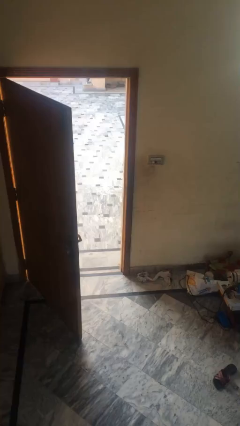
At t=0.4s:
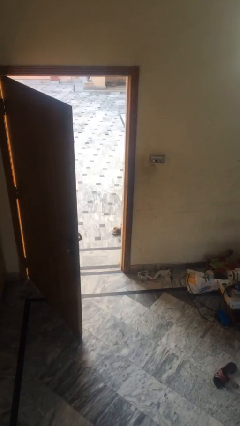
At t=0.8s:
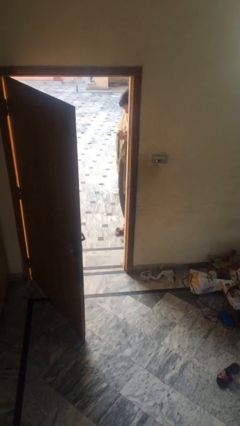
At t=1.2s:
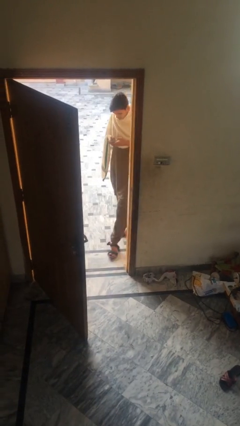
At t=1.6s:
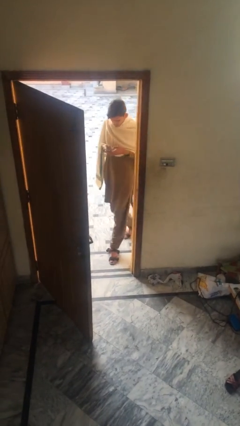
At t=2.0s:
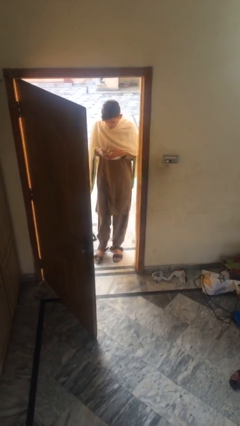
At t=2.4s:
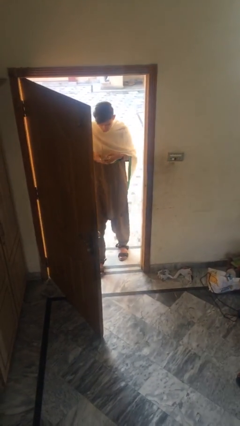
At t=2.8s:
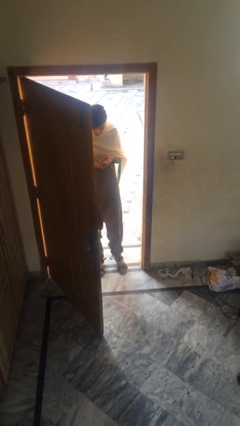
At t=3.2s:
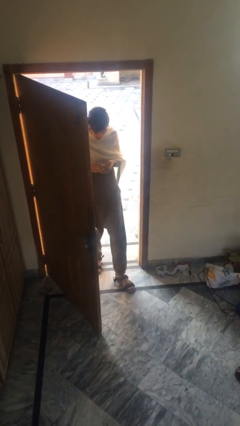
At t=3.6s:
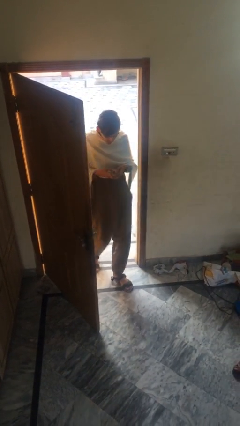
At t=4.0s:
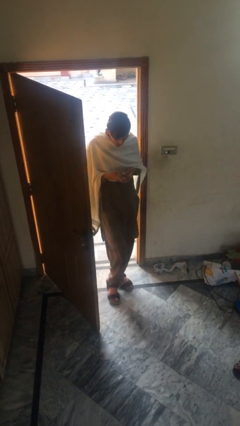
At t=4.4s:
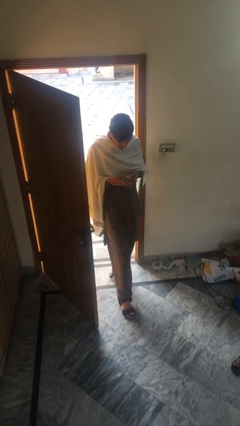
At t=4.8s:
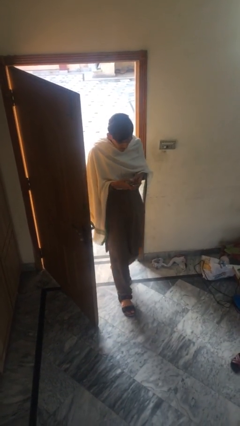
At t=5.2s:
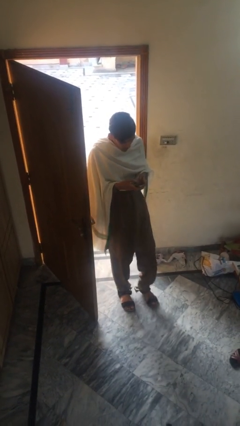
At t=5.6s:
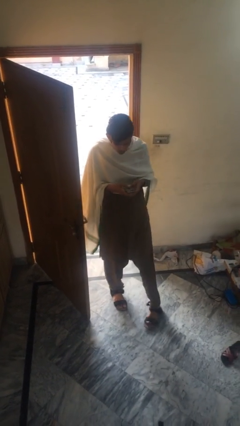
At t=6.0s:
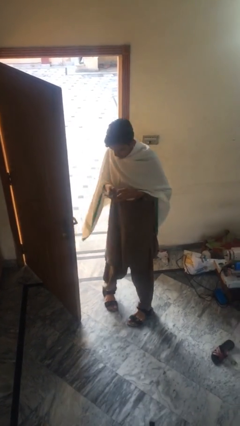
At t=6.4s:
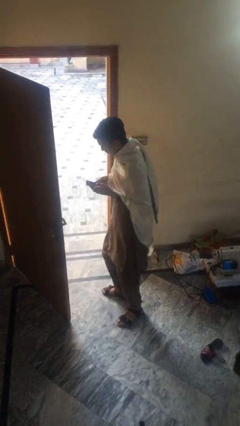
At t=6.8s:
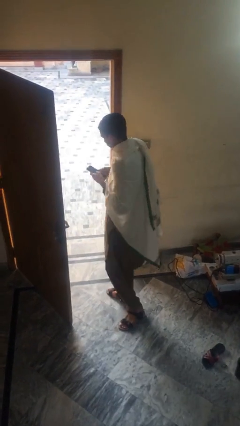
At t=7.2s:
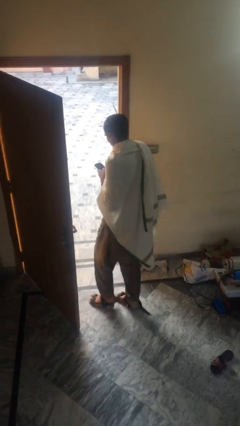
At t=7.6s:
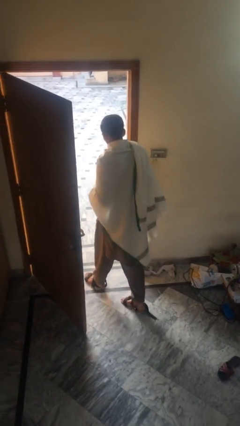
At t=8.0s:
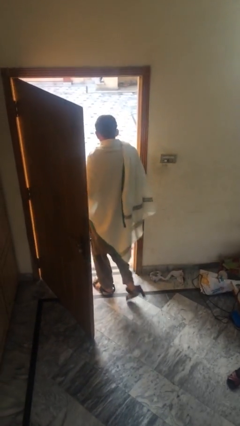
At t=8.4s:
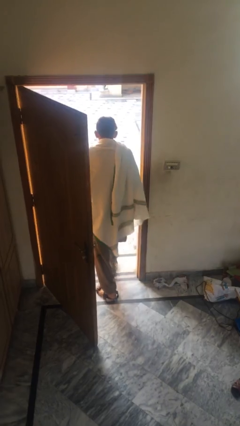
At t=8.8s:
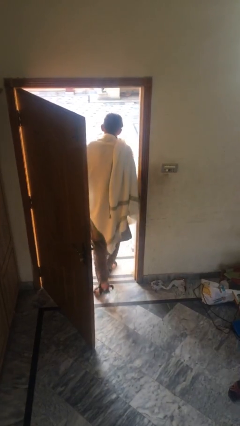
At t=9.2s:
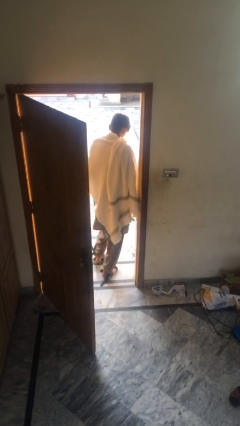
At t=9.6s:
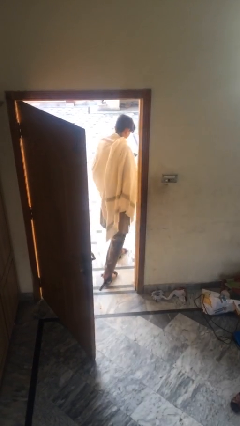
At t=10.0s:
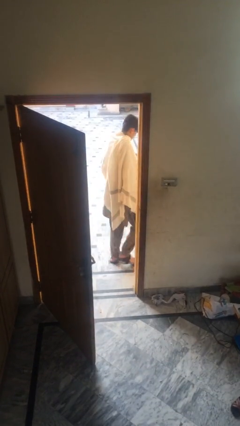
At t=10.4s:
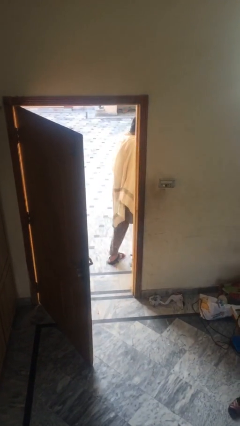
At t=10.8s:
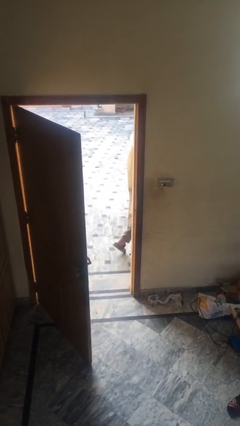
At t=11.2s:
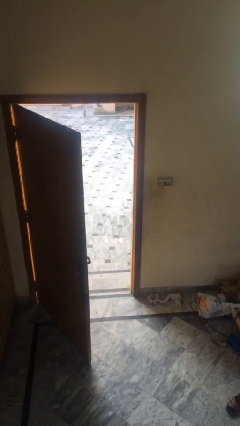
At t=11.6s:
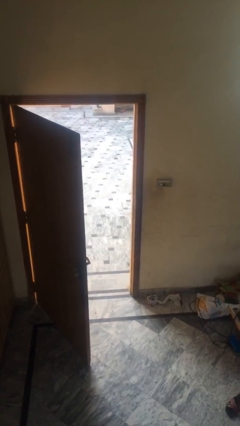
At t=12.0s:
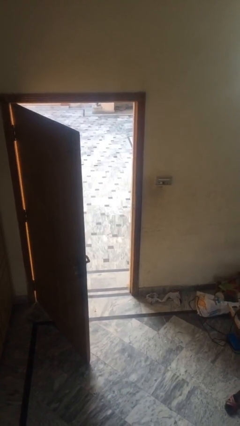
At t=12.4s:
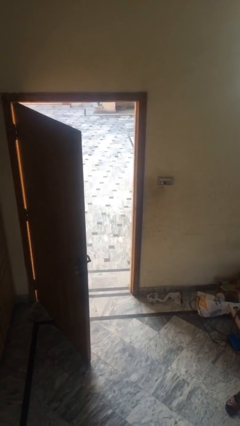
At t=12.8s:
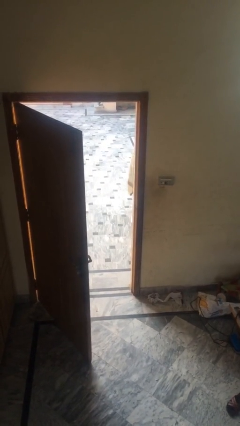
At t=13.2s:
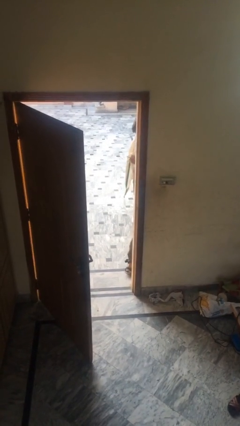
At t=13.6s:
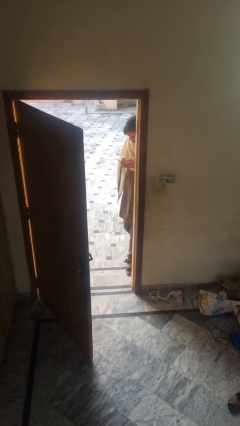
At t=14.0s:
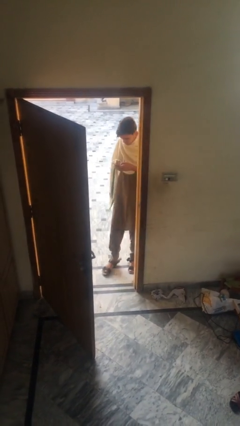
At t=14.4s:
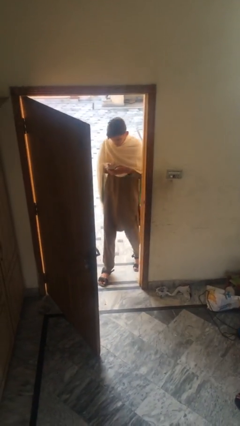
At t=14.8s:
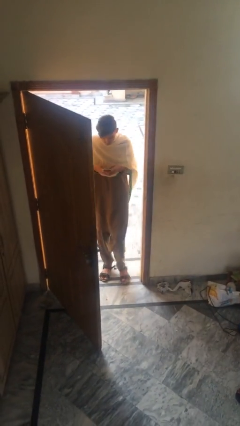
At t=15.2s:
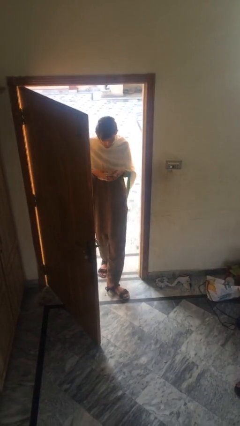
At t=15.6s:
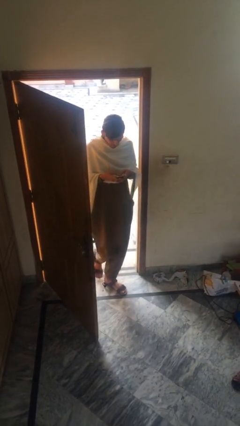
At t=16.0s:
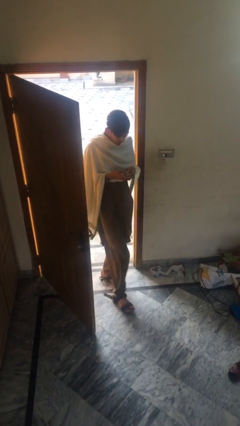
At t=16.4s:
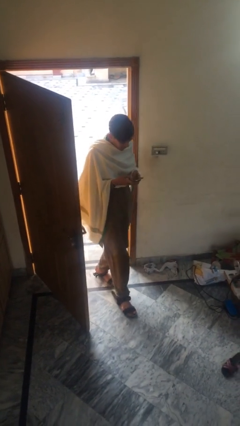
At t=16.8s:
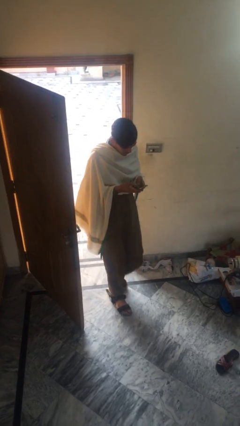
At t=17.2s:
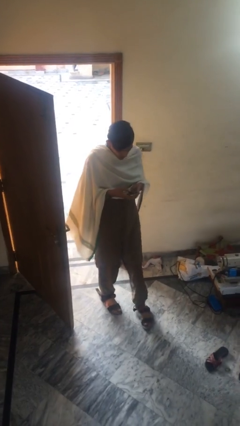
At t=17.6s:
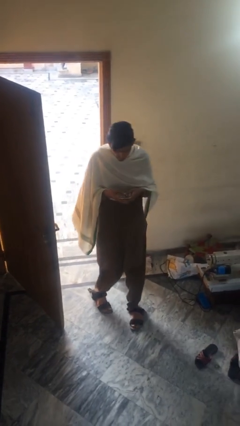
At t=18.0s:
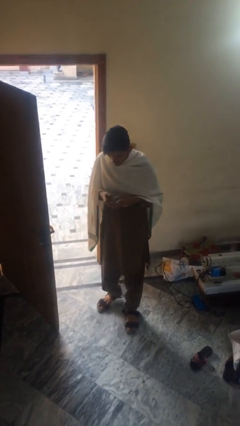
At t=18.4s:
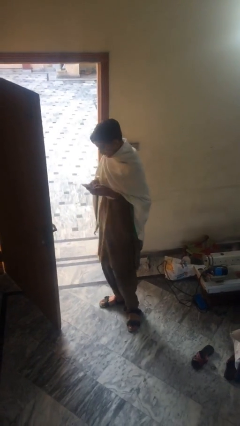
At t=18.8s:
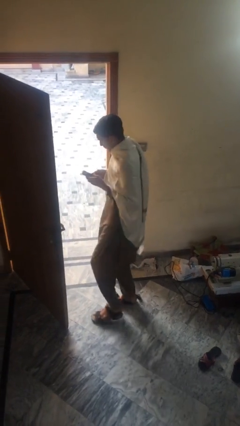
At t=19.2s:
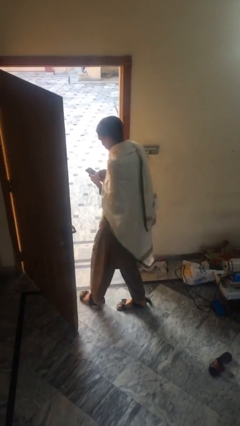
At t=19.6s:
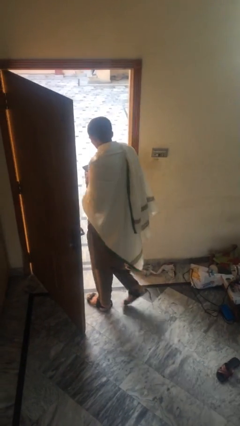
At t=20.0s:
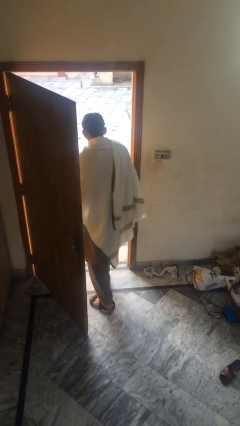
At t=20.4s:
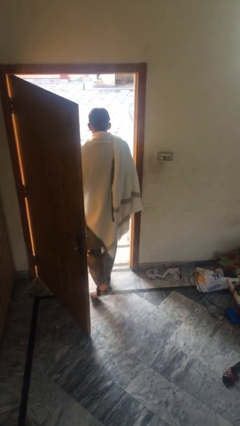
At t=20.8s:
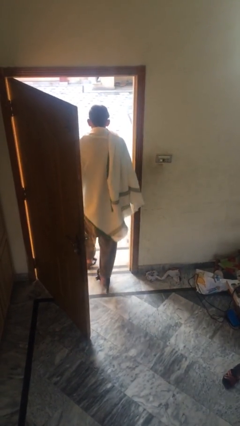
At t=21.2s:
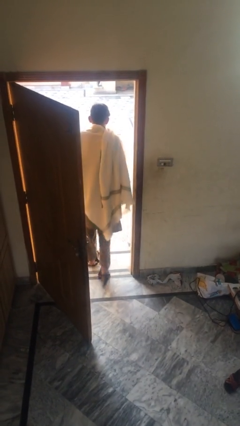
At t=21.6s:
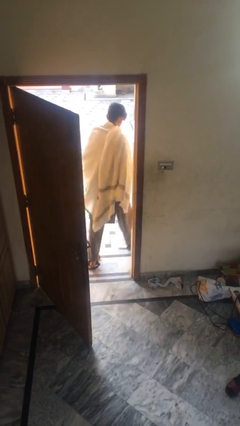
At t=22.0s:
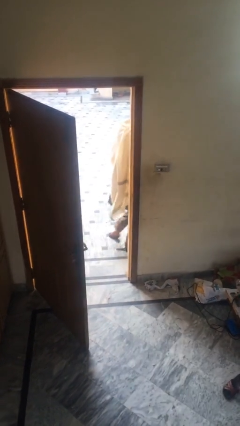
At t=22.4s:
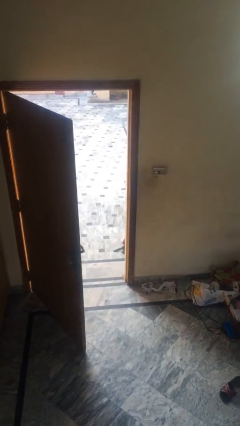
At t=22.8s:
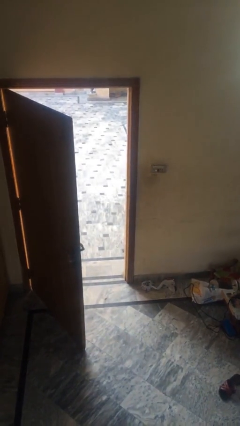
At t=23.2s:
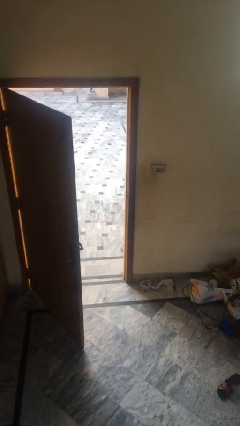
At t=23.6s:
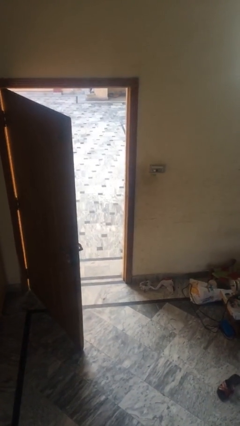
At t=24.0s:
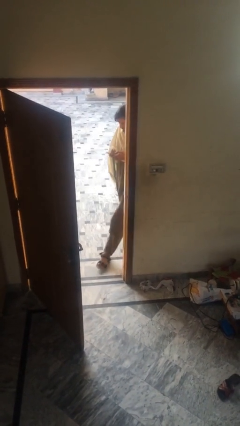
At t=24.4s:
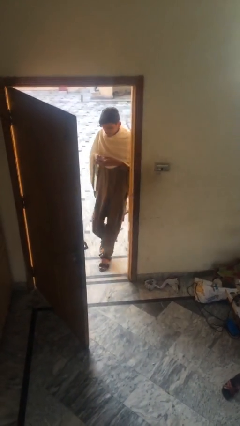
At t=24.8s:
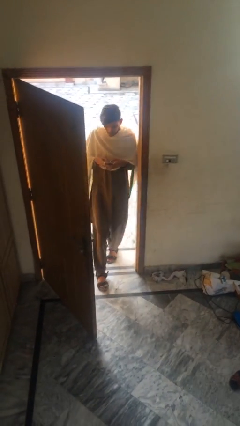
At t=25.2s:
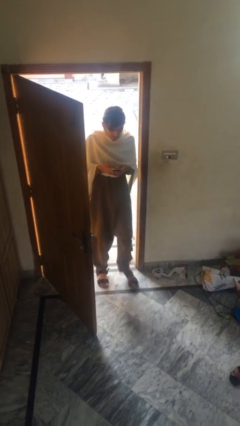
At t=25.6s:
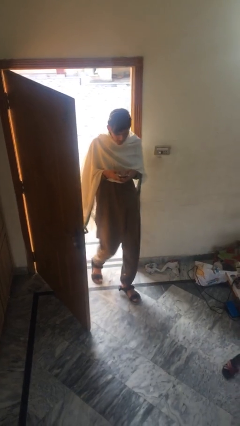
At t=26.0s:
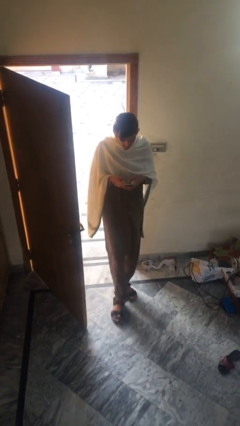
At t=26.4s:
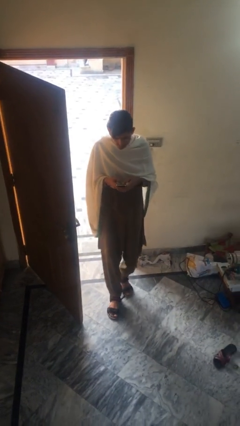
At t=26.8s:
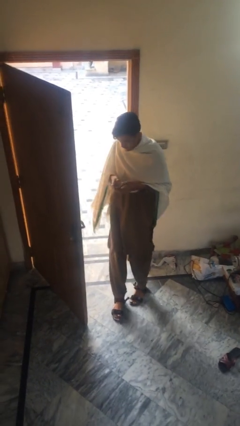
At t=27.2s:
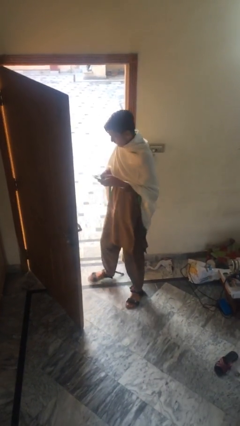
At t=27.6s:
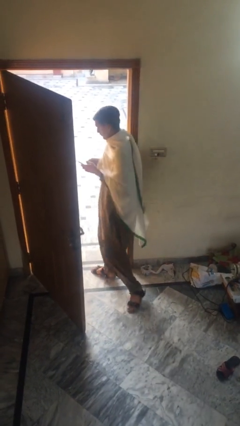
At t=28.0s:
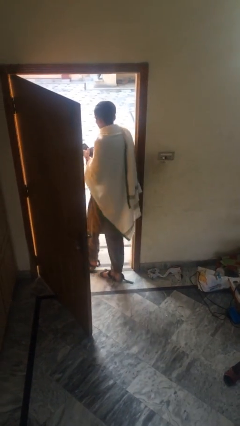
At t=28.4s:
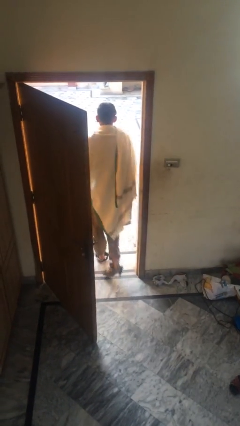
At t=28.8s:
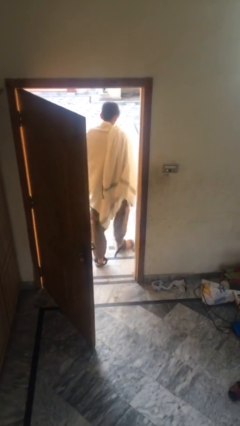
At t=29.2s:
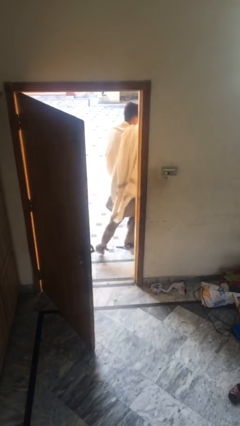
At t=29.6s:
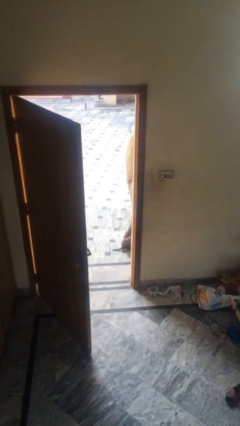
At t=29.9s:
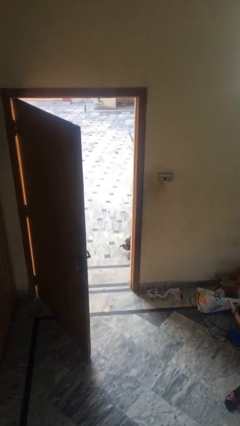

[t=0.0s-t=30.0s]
person texts on phone

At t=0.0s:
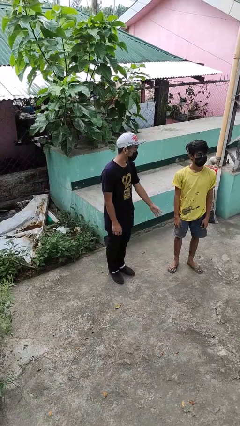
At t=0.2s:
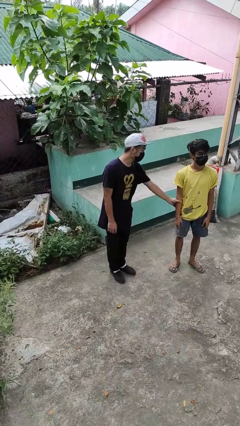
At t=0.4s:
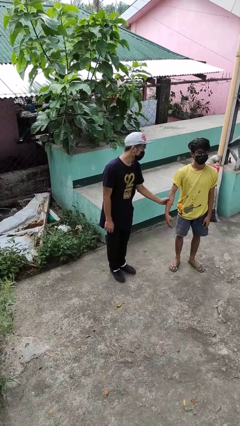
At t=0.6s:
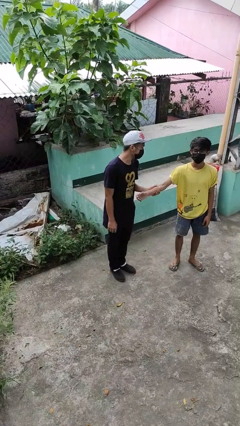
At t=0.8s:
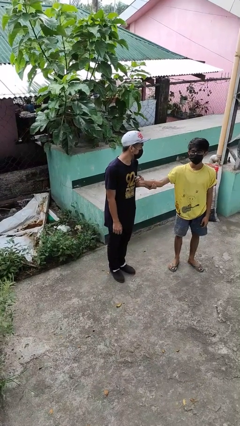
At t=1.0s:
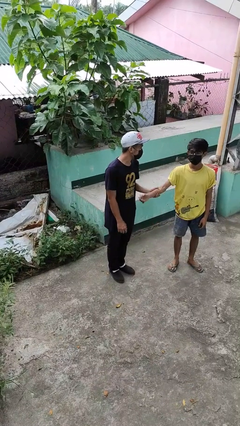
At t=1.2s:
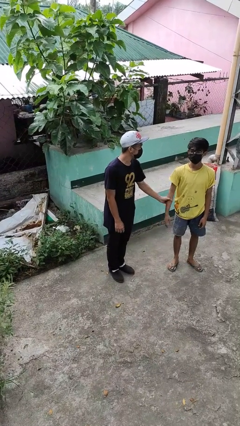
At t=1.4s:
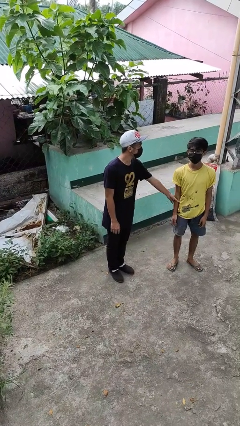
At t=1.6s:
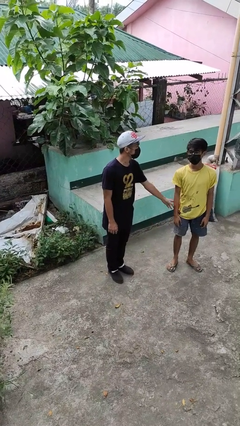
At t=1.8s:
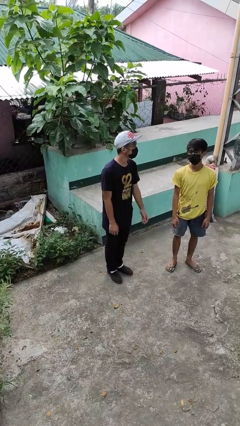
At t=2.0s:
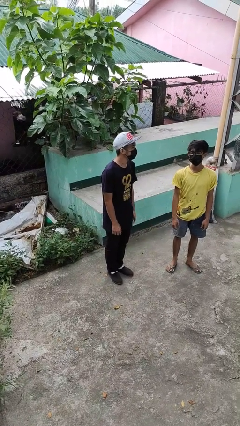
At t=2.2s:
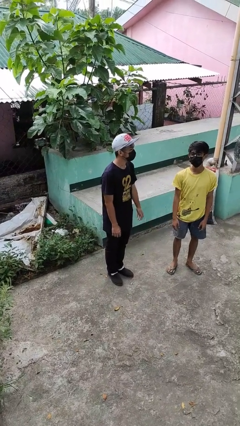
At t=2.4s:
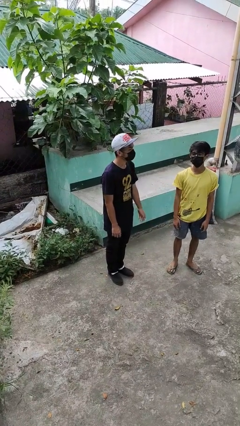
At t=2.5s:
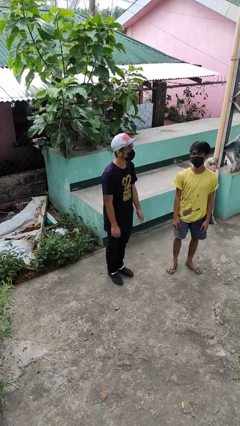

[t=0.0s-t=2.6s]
person grabs person by forearm

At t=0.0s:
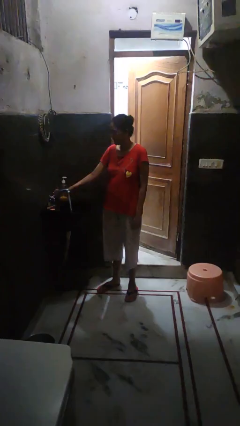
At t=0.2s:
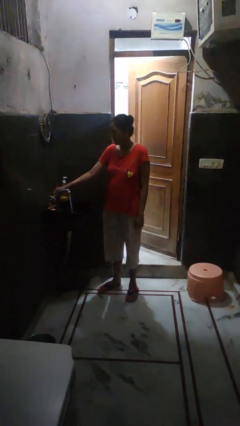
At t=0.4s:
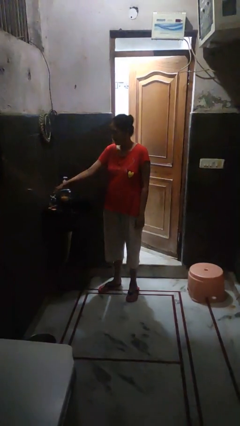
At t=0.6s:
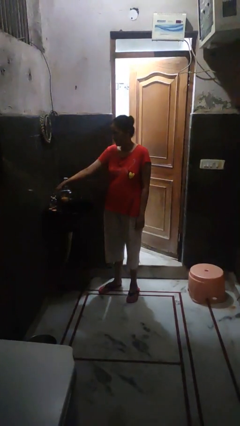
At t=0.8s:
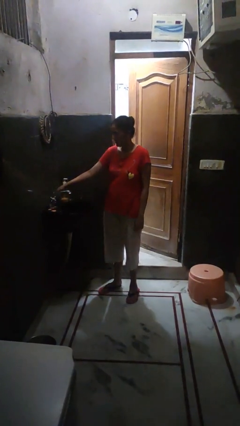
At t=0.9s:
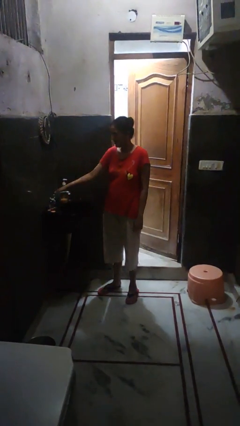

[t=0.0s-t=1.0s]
person turns off faucet
